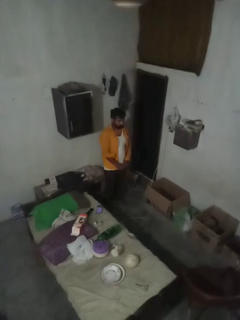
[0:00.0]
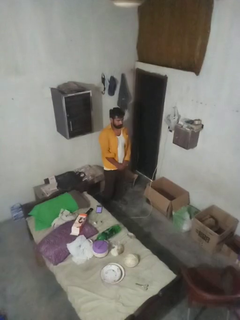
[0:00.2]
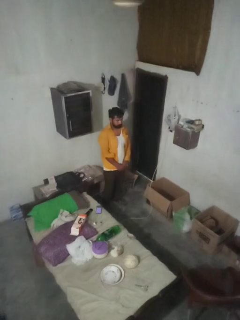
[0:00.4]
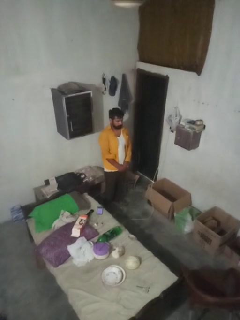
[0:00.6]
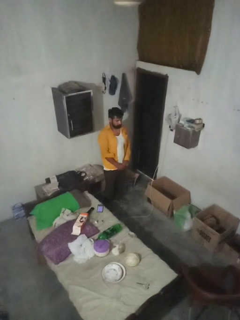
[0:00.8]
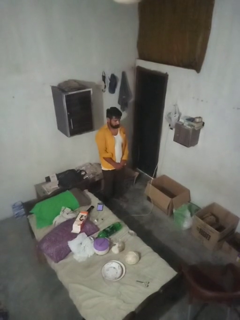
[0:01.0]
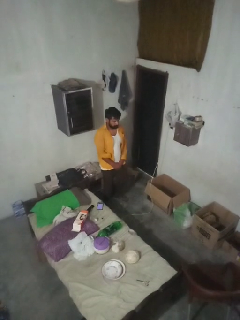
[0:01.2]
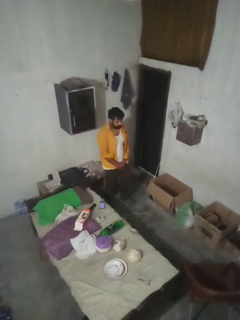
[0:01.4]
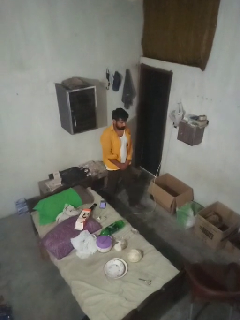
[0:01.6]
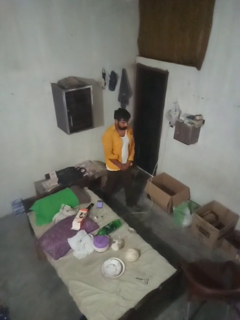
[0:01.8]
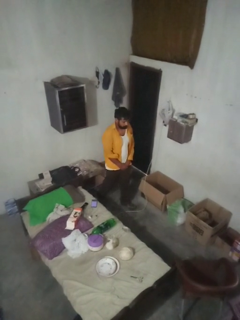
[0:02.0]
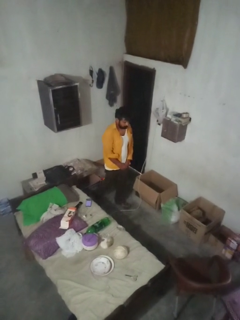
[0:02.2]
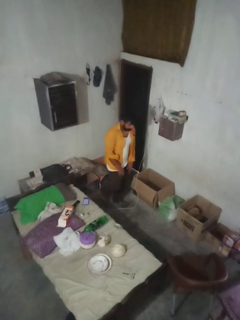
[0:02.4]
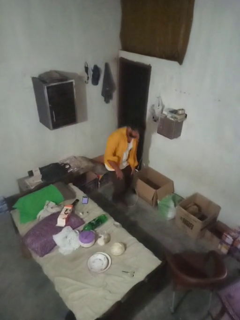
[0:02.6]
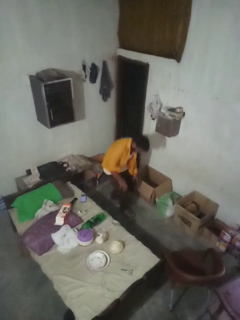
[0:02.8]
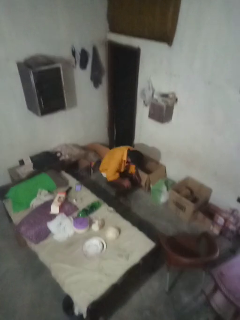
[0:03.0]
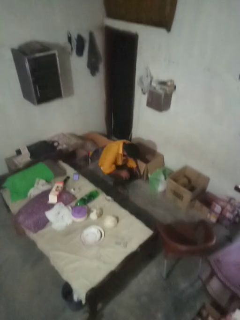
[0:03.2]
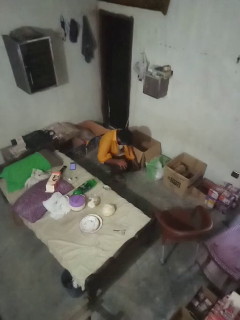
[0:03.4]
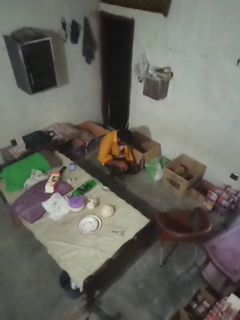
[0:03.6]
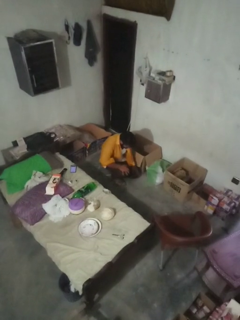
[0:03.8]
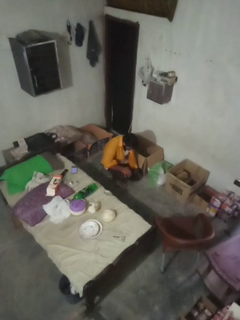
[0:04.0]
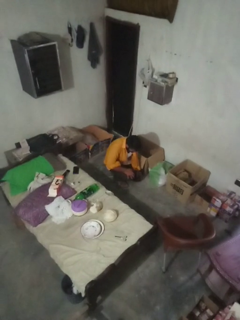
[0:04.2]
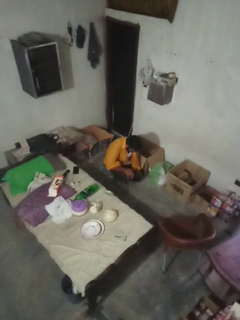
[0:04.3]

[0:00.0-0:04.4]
person trips on object on floor

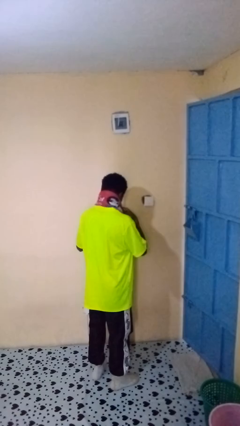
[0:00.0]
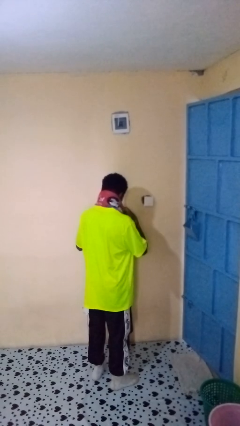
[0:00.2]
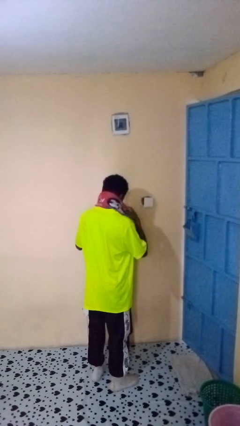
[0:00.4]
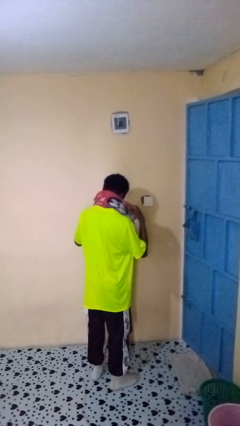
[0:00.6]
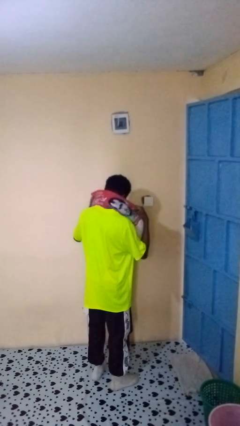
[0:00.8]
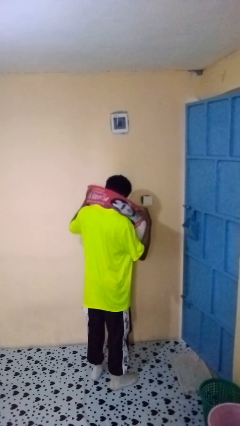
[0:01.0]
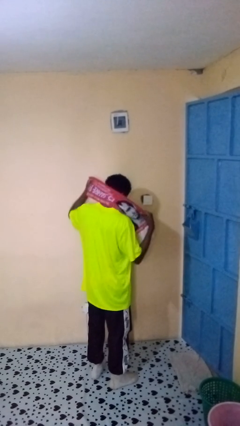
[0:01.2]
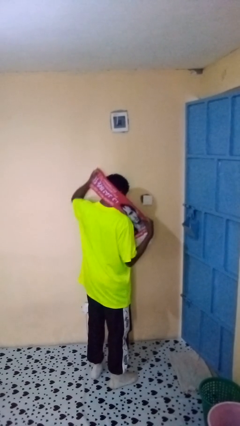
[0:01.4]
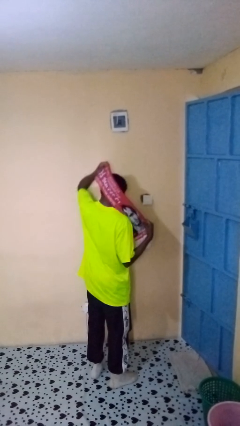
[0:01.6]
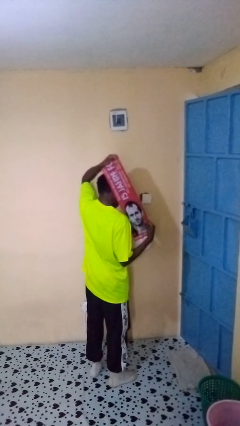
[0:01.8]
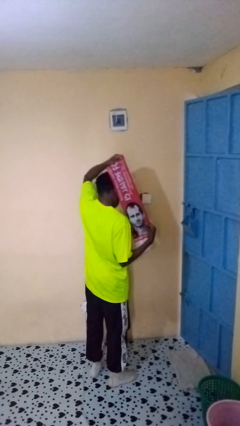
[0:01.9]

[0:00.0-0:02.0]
person takes off scarf

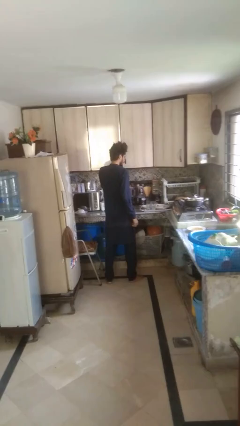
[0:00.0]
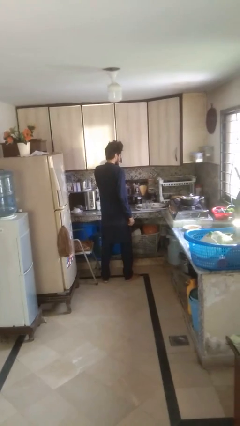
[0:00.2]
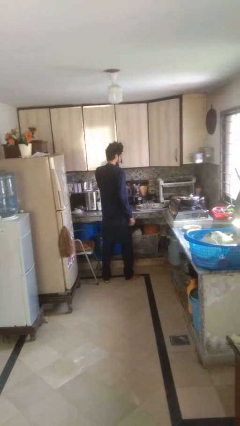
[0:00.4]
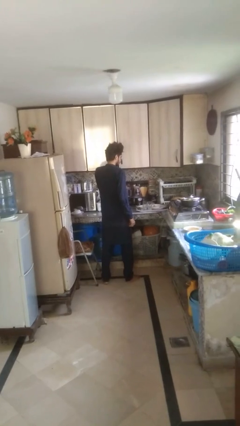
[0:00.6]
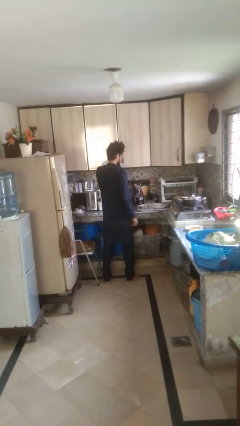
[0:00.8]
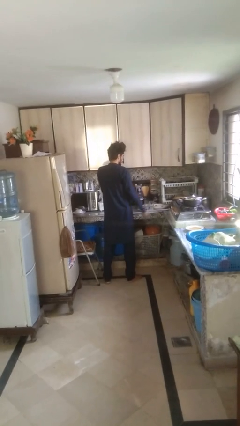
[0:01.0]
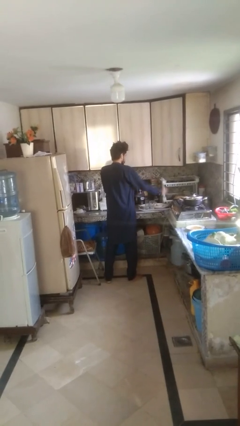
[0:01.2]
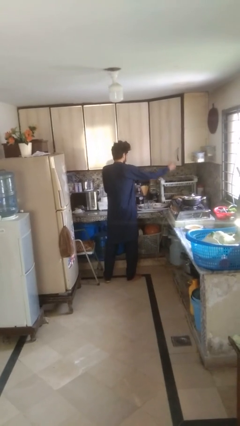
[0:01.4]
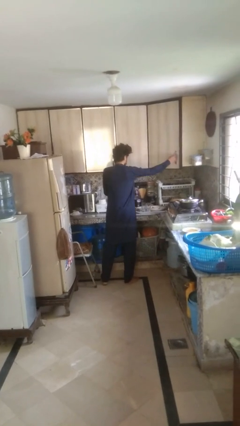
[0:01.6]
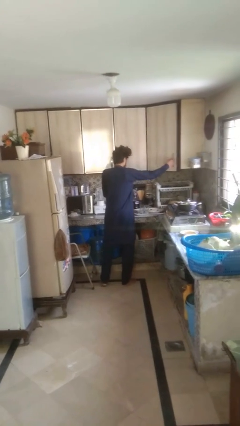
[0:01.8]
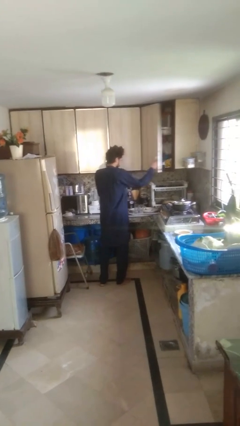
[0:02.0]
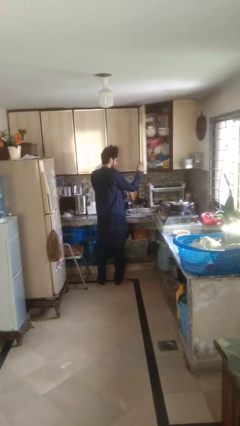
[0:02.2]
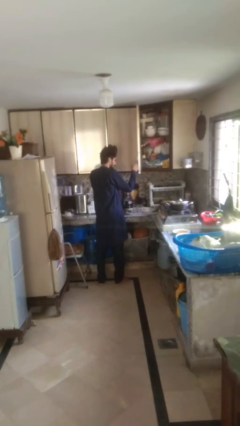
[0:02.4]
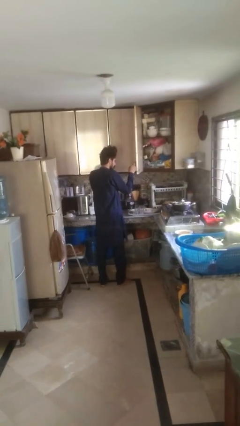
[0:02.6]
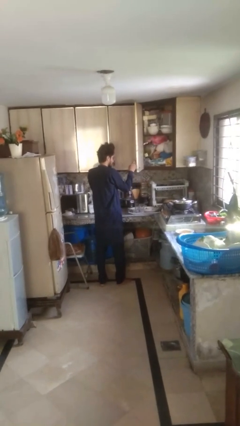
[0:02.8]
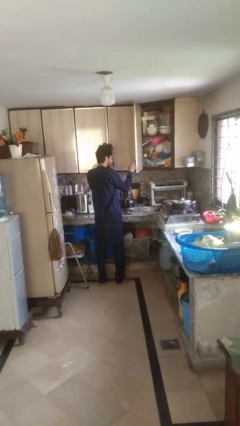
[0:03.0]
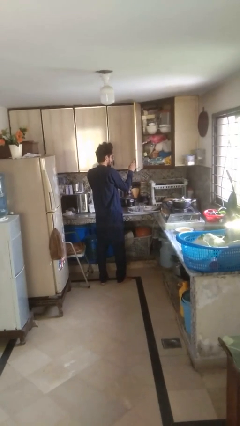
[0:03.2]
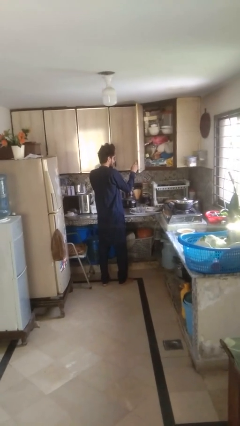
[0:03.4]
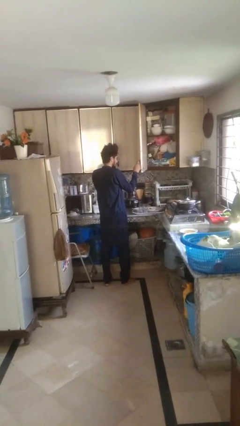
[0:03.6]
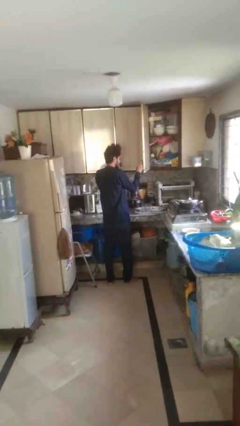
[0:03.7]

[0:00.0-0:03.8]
person opens cabinet

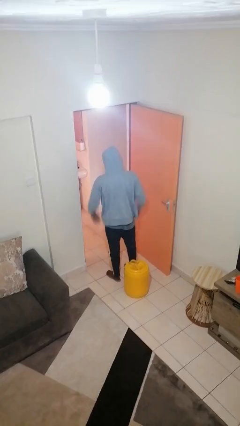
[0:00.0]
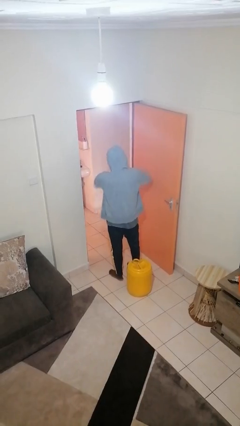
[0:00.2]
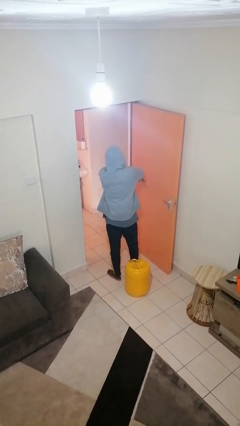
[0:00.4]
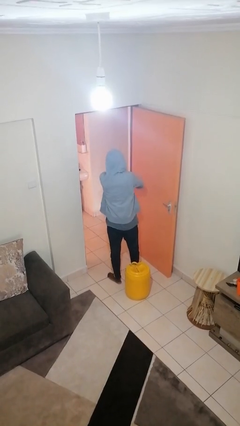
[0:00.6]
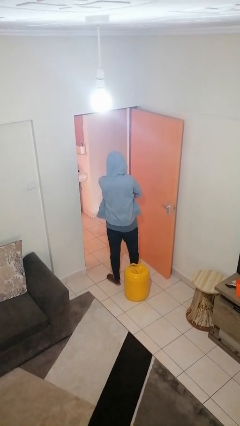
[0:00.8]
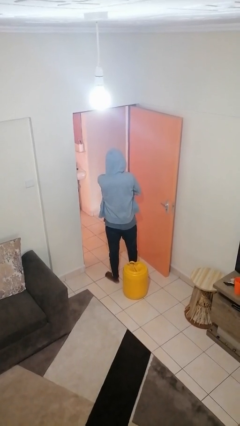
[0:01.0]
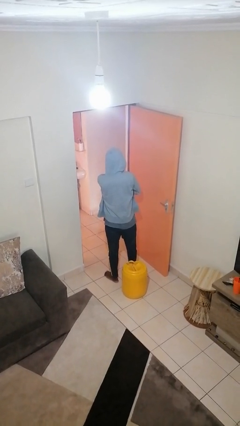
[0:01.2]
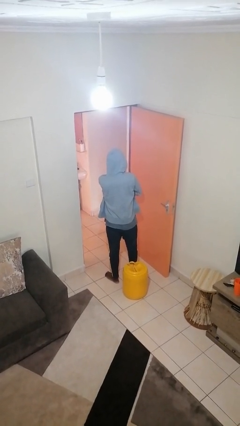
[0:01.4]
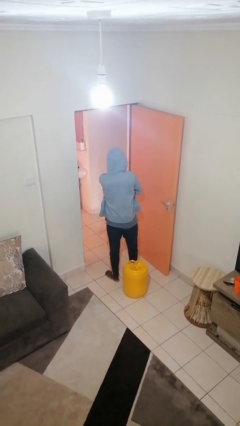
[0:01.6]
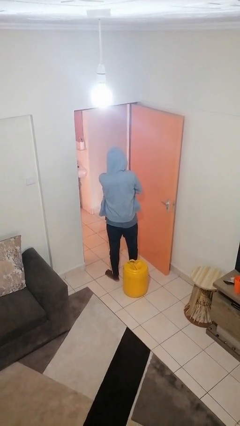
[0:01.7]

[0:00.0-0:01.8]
person crosses arms

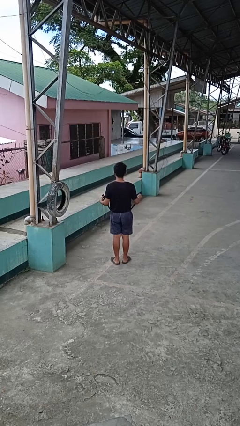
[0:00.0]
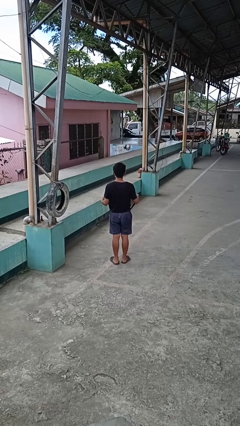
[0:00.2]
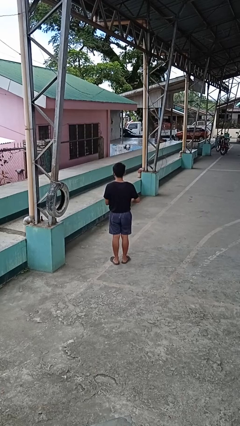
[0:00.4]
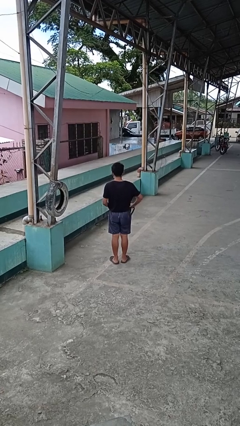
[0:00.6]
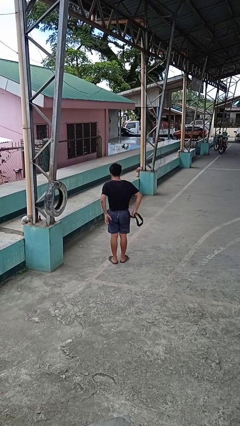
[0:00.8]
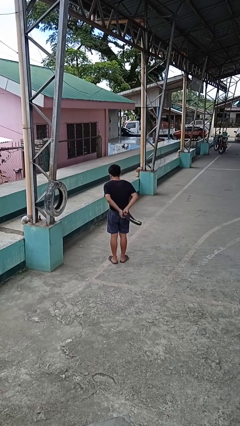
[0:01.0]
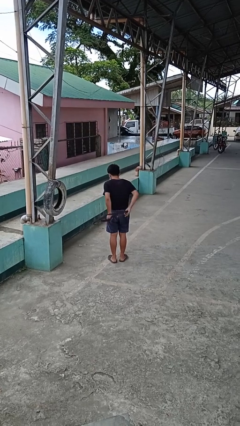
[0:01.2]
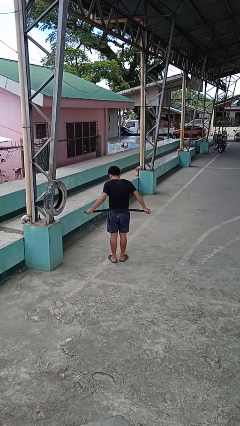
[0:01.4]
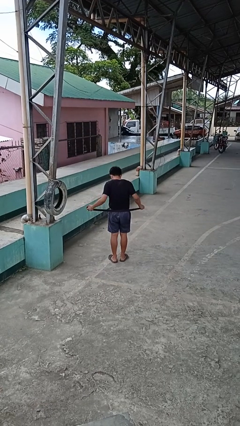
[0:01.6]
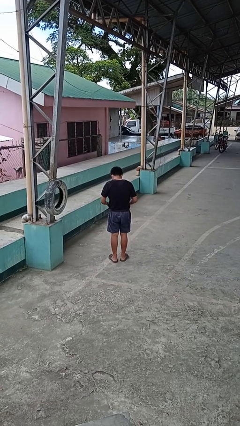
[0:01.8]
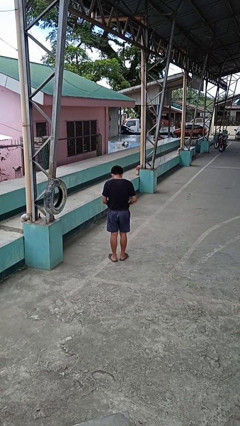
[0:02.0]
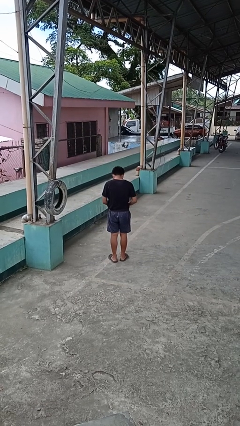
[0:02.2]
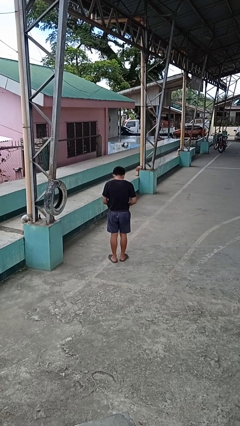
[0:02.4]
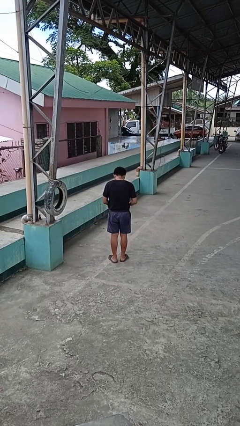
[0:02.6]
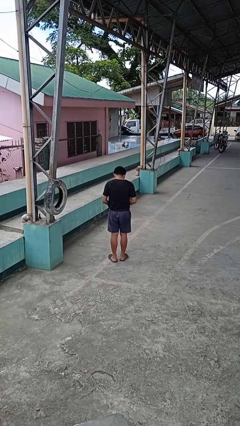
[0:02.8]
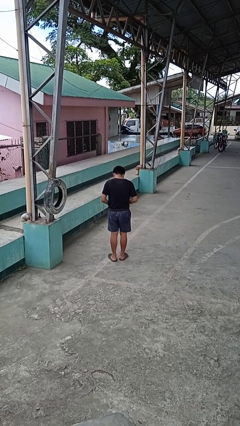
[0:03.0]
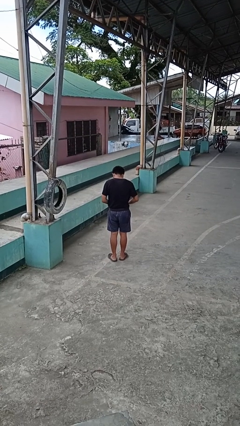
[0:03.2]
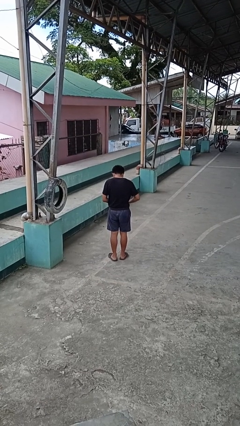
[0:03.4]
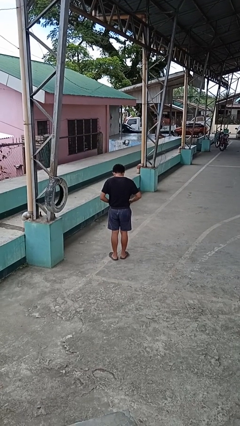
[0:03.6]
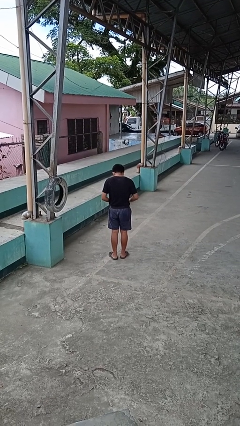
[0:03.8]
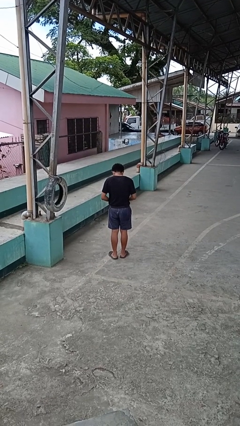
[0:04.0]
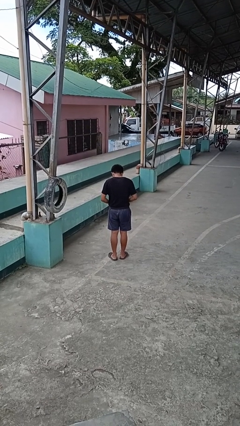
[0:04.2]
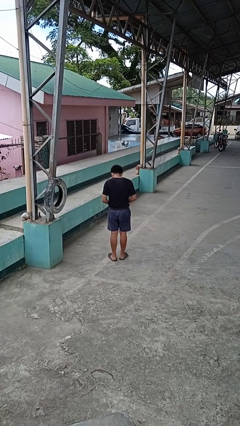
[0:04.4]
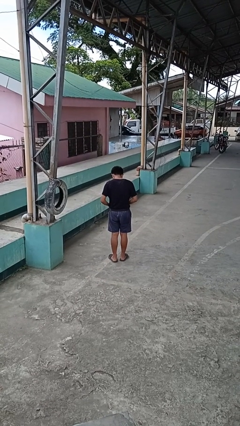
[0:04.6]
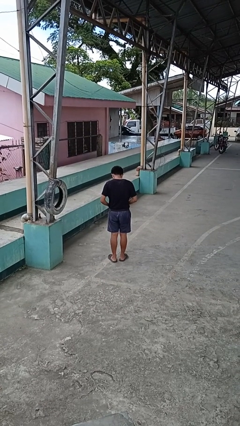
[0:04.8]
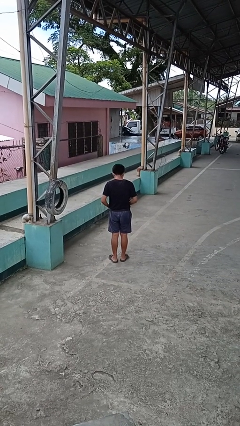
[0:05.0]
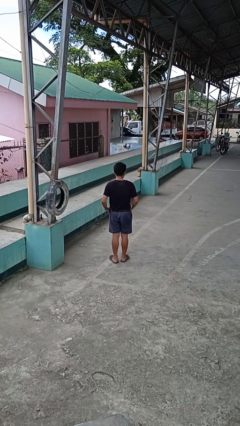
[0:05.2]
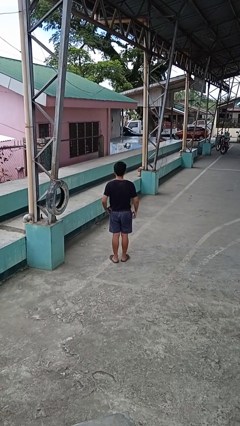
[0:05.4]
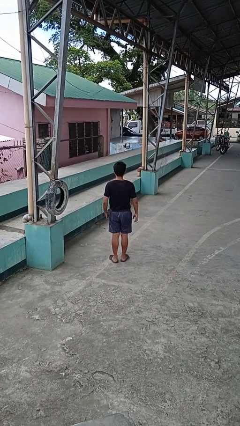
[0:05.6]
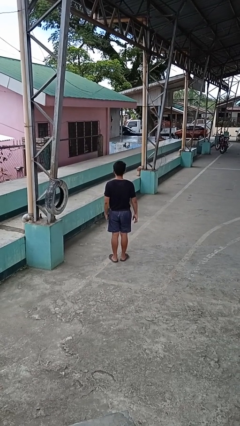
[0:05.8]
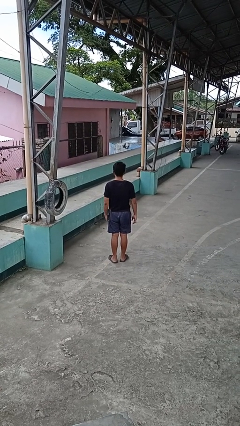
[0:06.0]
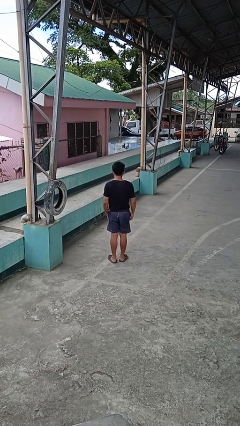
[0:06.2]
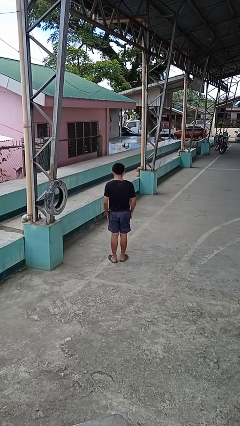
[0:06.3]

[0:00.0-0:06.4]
person puts on belt
